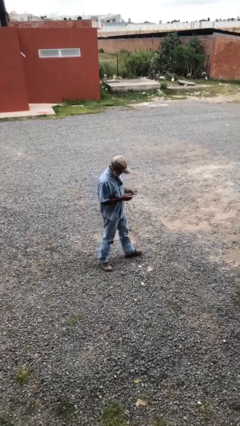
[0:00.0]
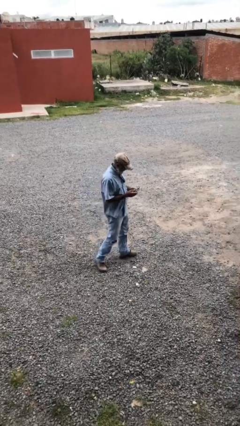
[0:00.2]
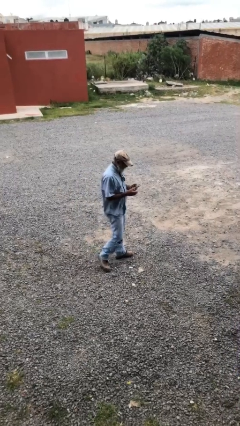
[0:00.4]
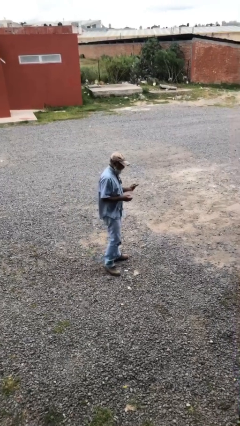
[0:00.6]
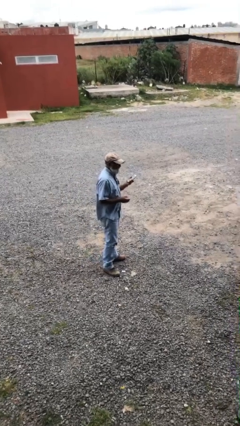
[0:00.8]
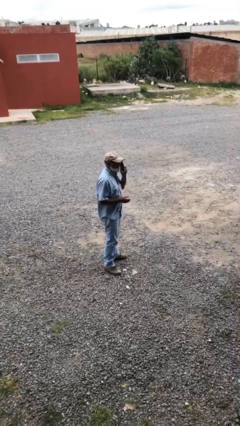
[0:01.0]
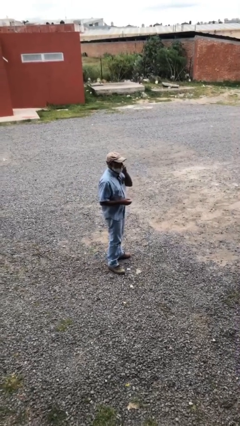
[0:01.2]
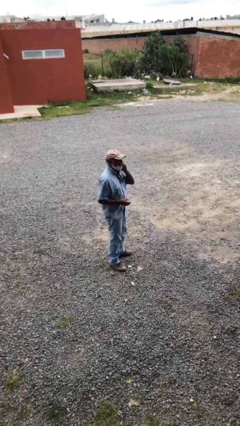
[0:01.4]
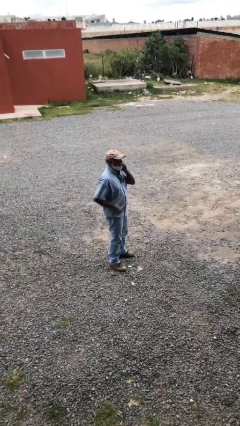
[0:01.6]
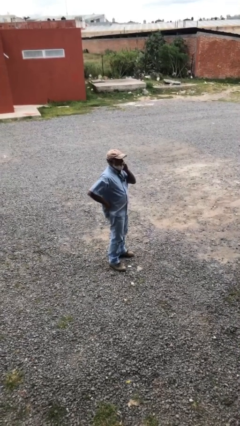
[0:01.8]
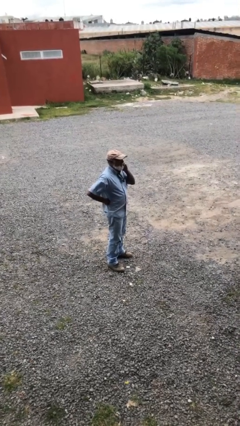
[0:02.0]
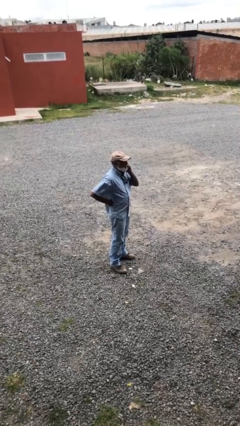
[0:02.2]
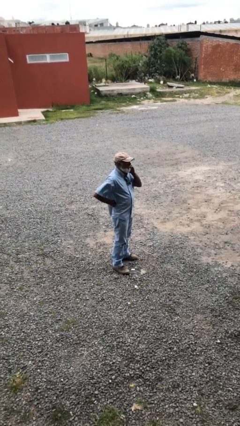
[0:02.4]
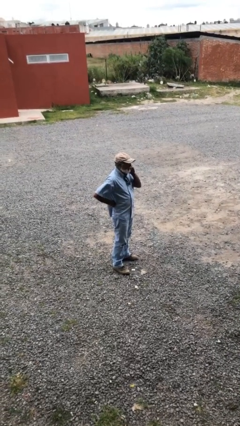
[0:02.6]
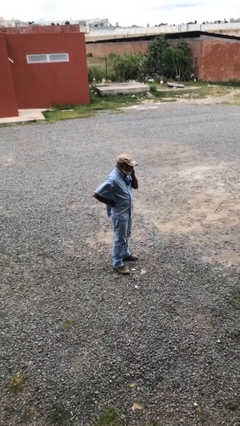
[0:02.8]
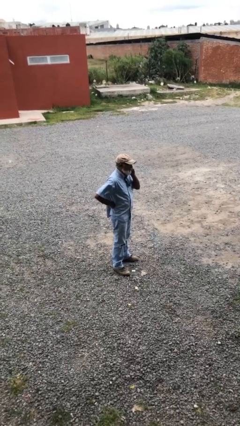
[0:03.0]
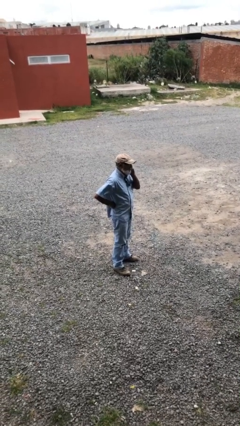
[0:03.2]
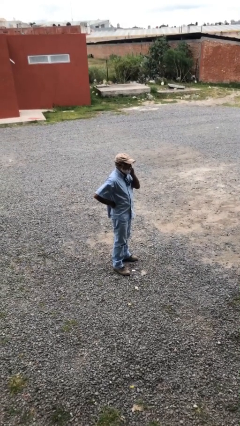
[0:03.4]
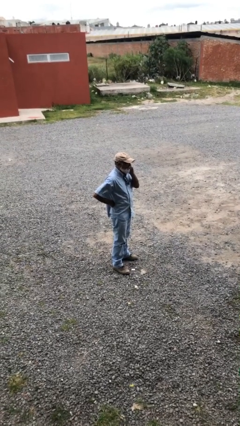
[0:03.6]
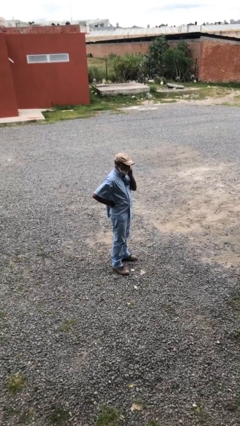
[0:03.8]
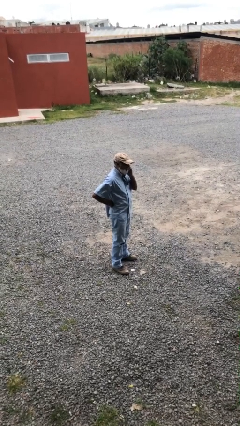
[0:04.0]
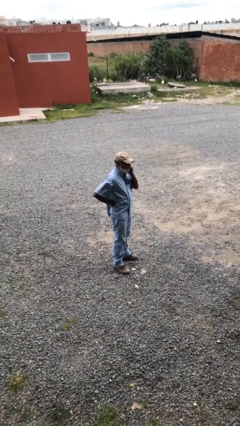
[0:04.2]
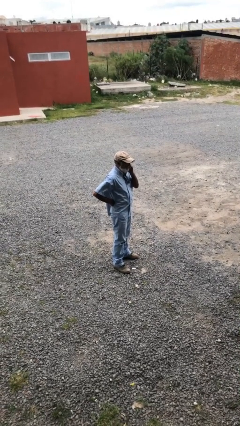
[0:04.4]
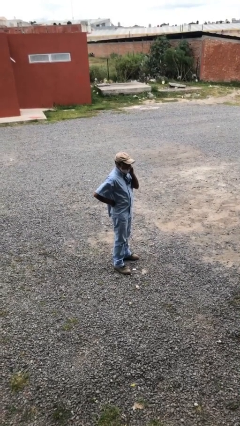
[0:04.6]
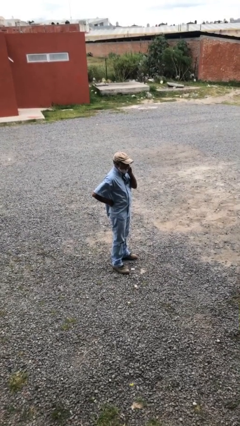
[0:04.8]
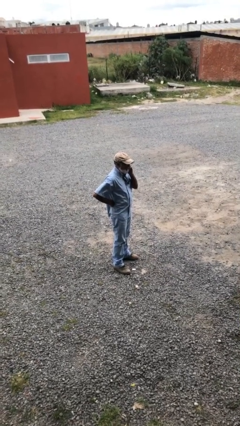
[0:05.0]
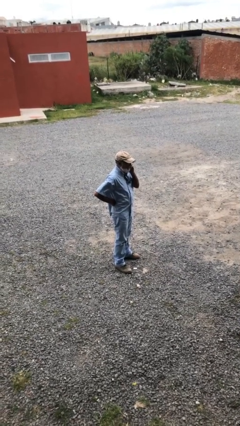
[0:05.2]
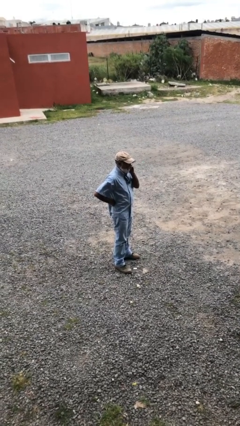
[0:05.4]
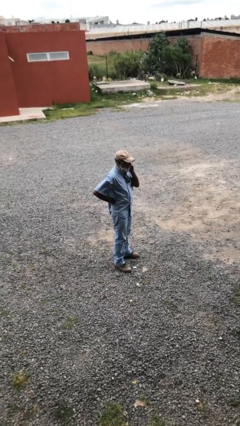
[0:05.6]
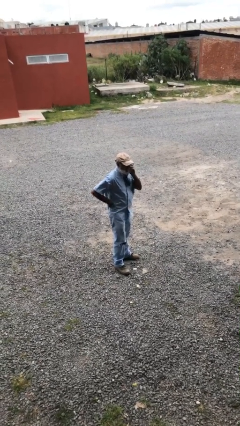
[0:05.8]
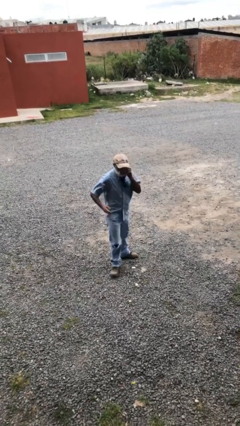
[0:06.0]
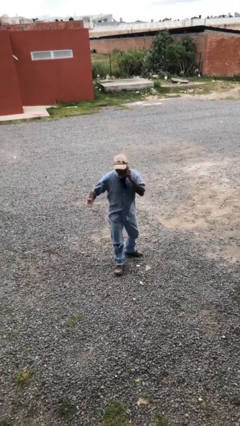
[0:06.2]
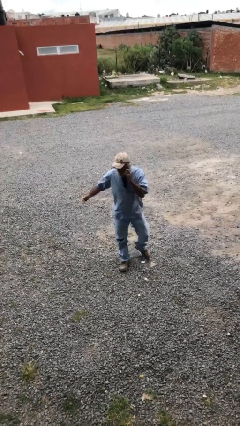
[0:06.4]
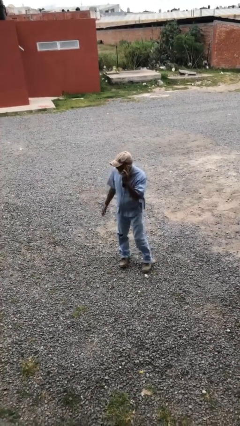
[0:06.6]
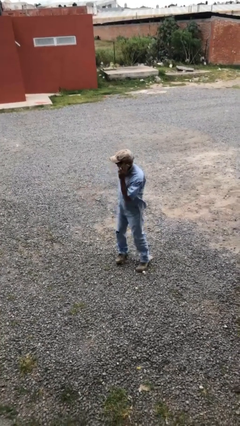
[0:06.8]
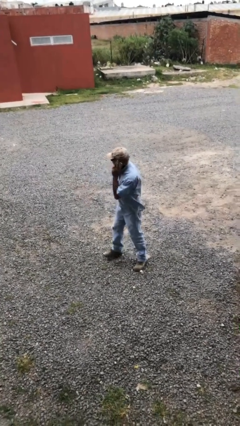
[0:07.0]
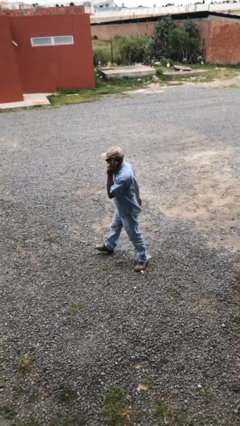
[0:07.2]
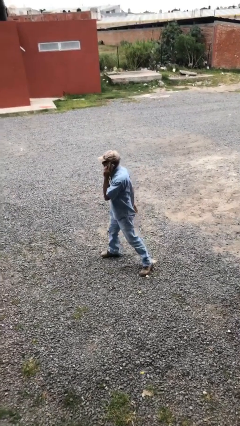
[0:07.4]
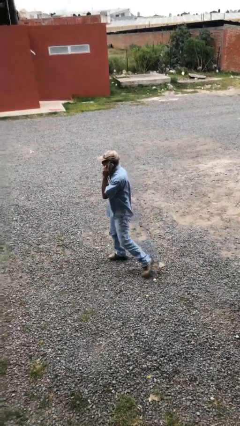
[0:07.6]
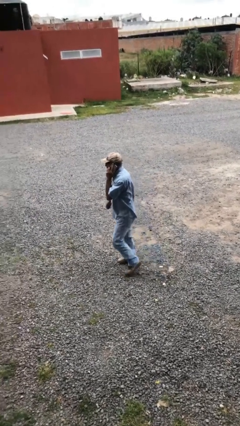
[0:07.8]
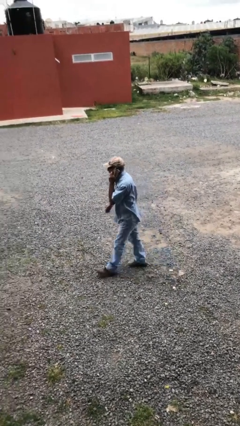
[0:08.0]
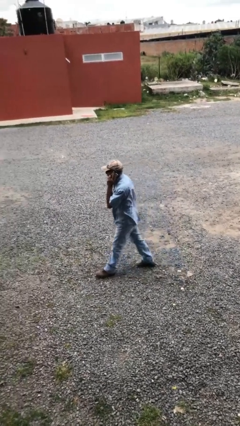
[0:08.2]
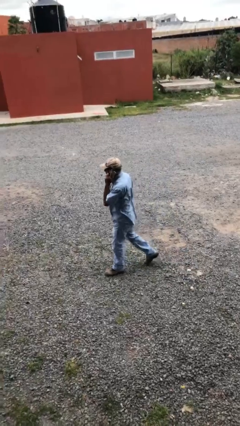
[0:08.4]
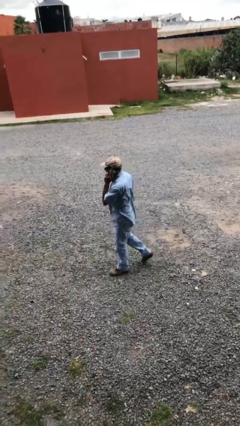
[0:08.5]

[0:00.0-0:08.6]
person talks on phone

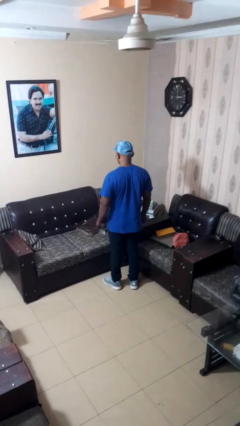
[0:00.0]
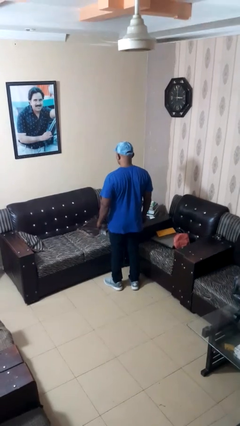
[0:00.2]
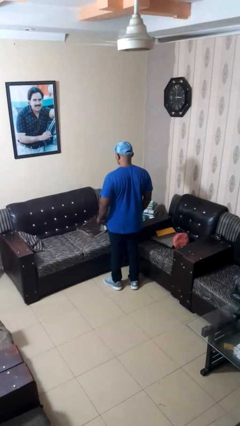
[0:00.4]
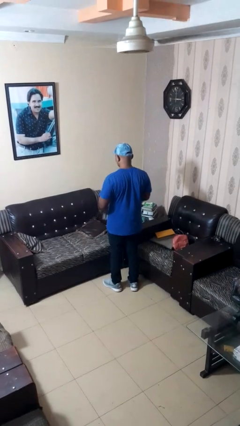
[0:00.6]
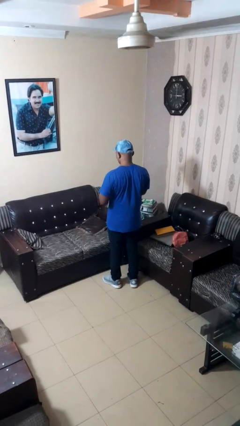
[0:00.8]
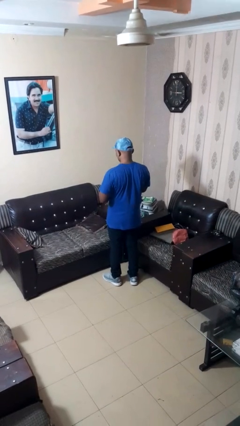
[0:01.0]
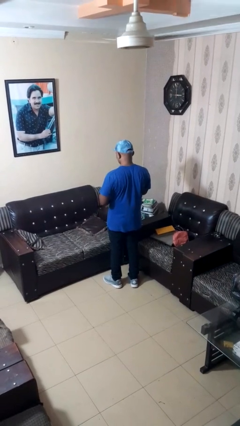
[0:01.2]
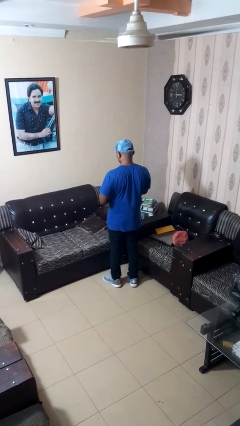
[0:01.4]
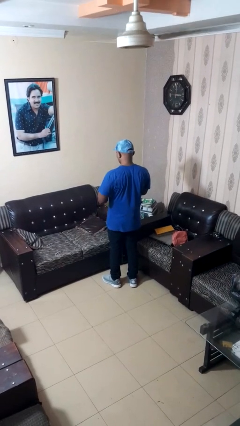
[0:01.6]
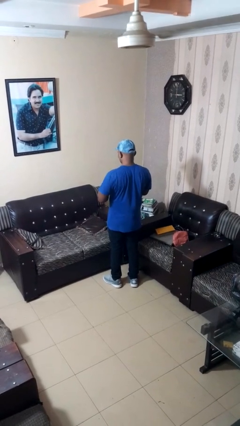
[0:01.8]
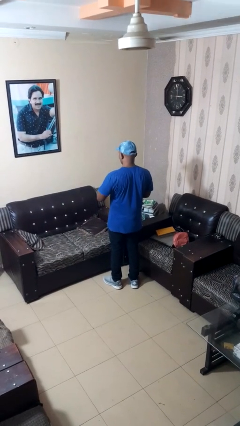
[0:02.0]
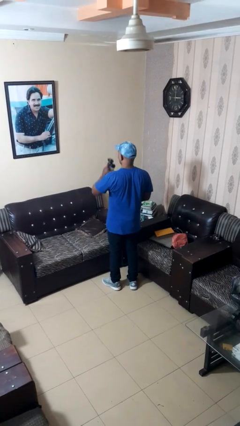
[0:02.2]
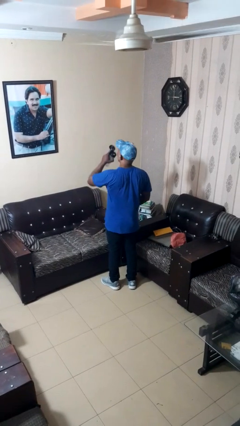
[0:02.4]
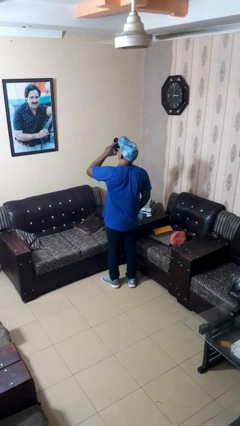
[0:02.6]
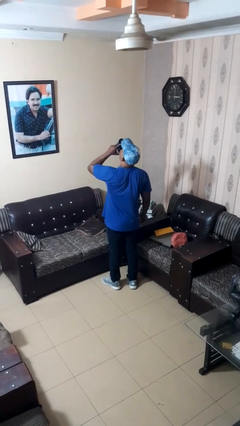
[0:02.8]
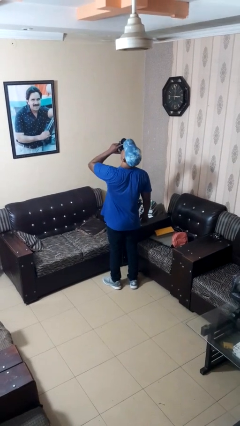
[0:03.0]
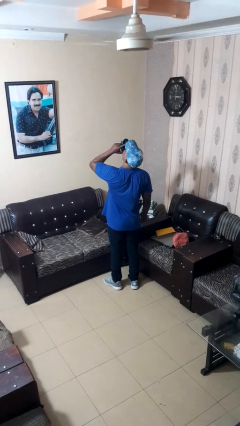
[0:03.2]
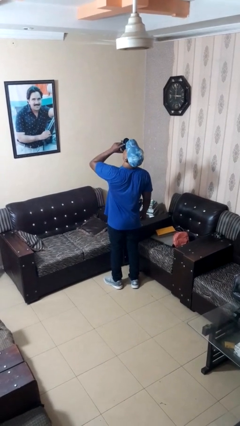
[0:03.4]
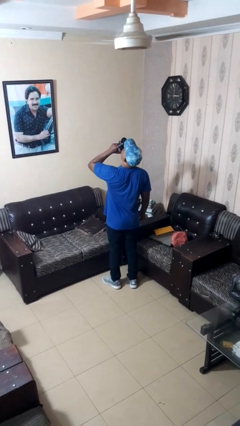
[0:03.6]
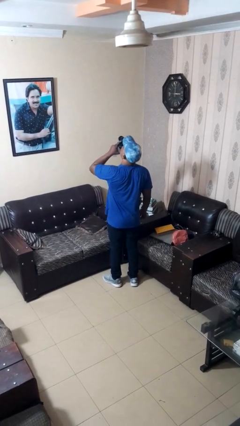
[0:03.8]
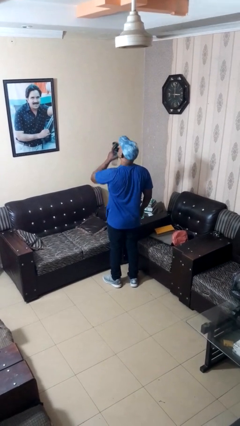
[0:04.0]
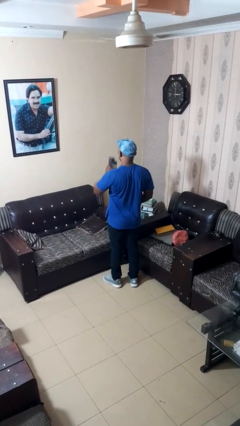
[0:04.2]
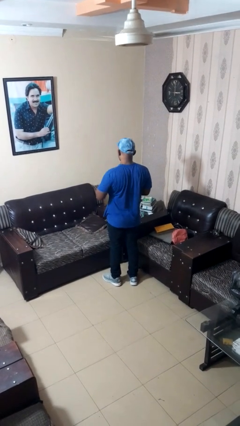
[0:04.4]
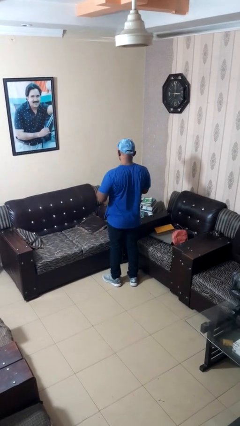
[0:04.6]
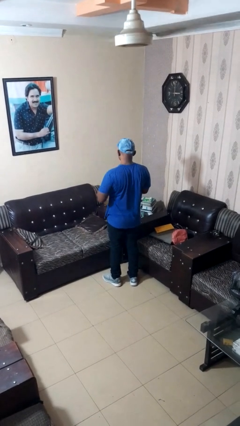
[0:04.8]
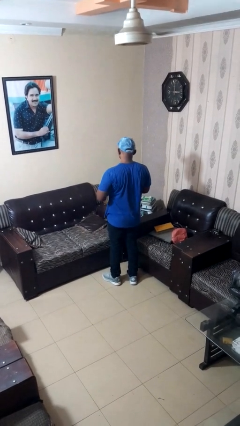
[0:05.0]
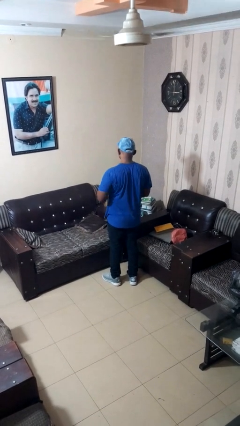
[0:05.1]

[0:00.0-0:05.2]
person drinks from bottle

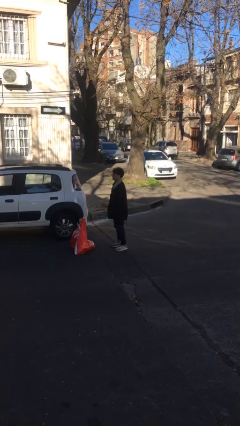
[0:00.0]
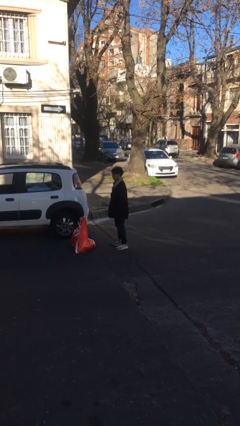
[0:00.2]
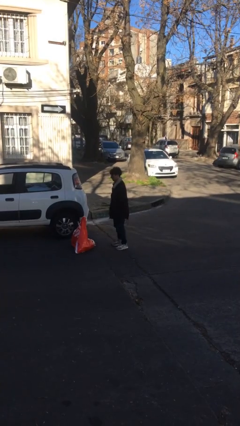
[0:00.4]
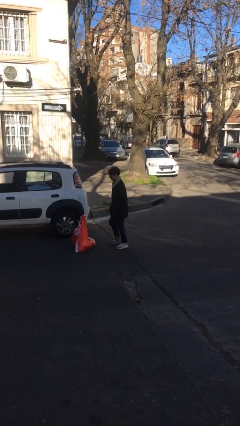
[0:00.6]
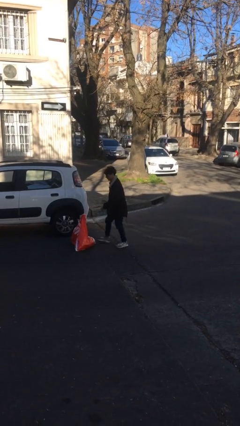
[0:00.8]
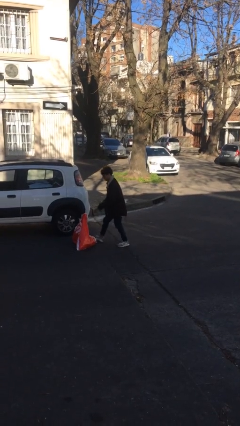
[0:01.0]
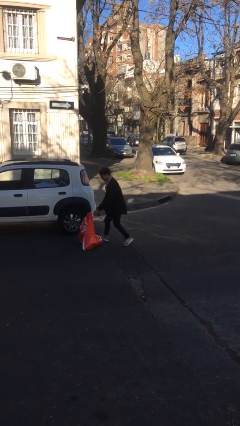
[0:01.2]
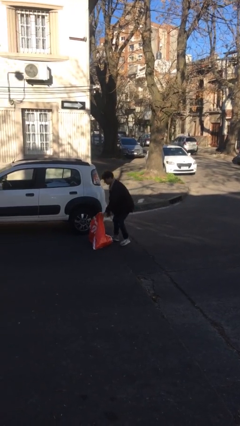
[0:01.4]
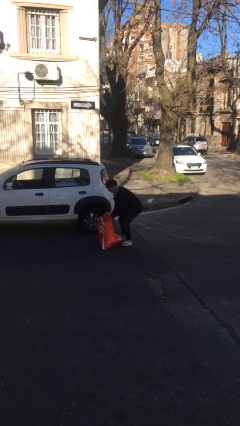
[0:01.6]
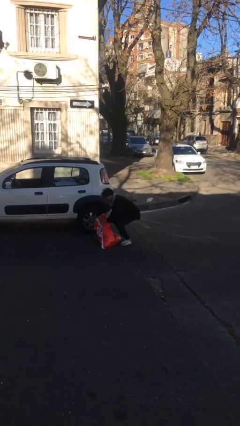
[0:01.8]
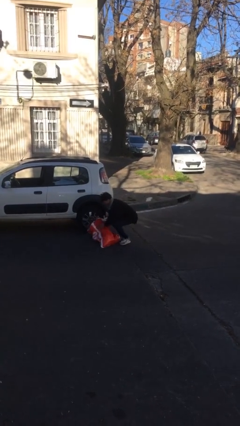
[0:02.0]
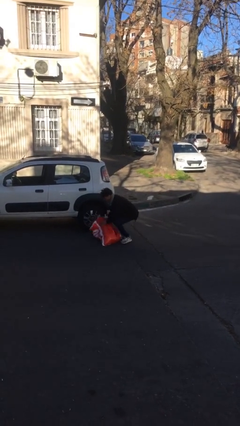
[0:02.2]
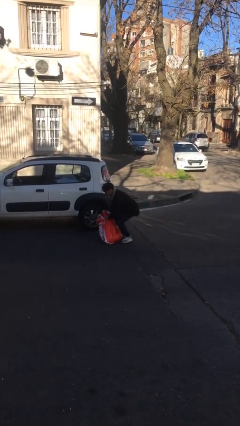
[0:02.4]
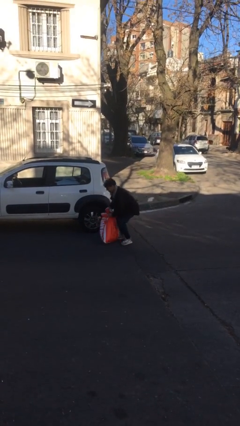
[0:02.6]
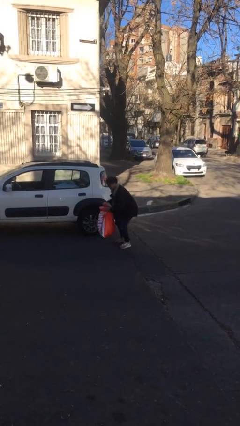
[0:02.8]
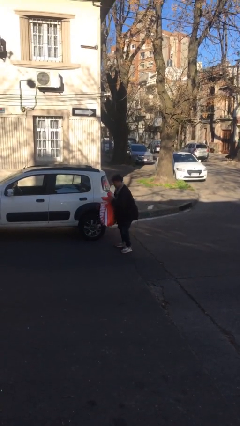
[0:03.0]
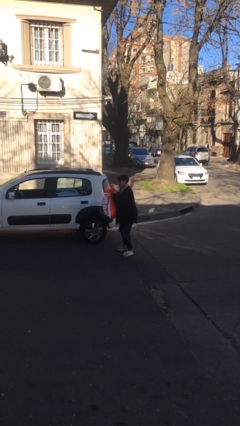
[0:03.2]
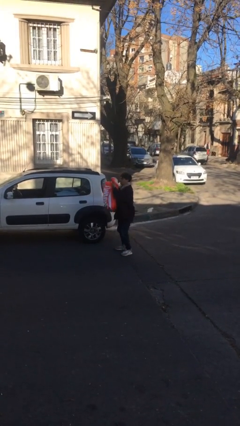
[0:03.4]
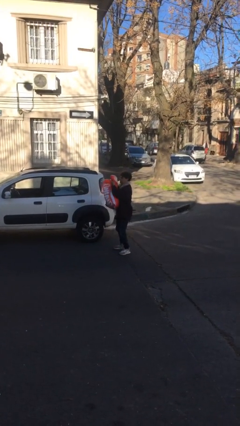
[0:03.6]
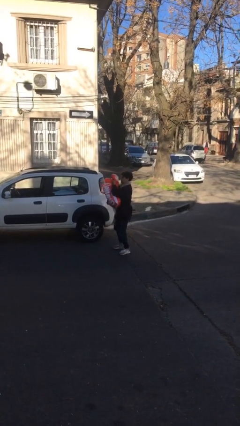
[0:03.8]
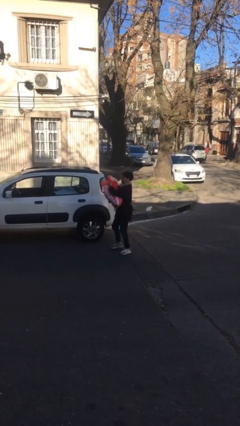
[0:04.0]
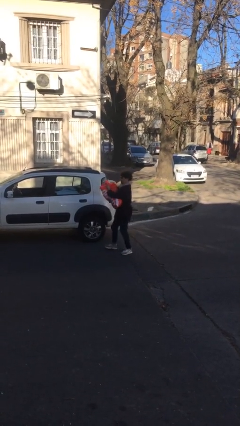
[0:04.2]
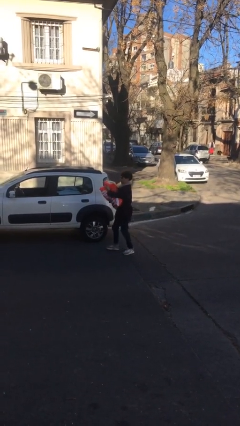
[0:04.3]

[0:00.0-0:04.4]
person picks up object from floor
